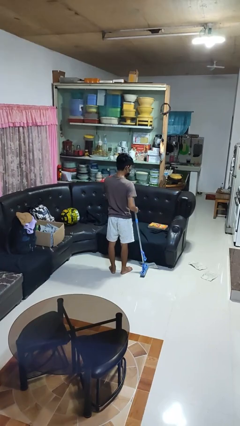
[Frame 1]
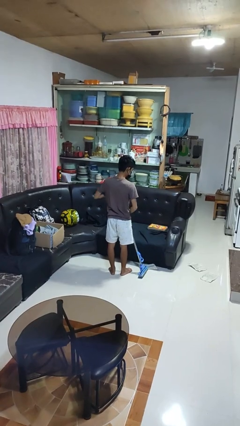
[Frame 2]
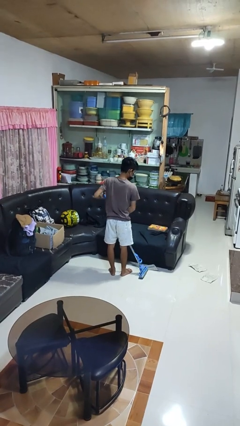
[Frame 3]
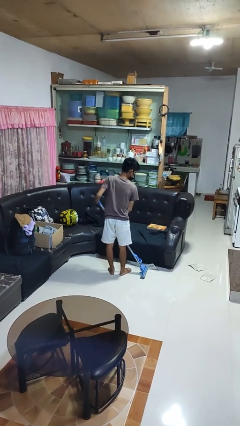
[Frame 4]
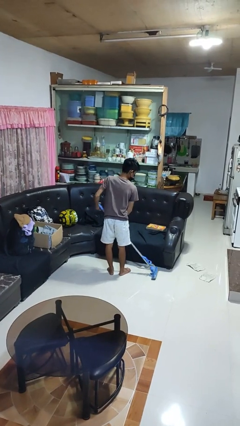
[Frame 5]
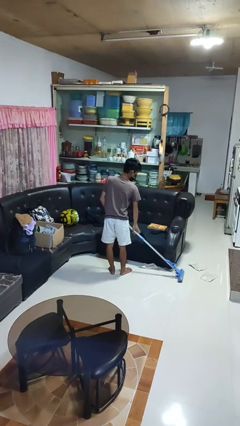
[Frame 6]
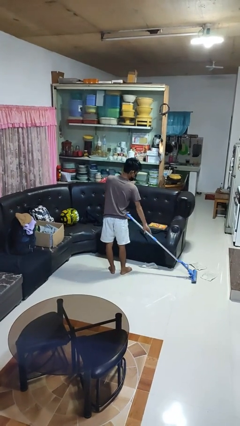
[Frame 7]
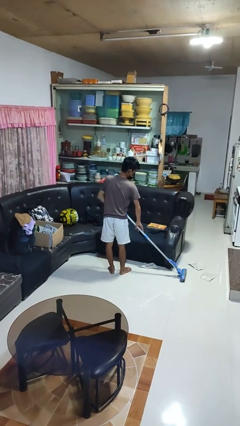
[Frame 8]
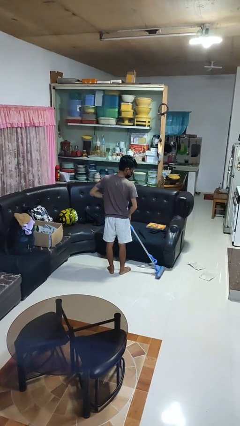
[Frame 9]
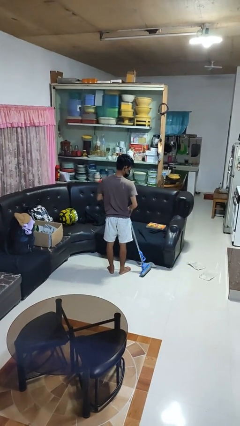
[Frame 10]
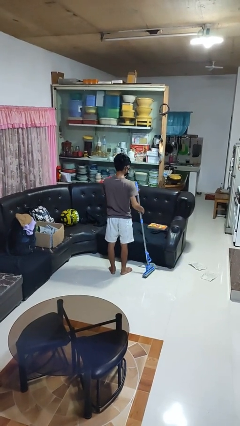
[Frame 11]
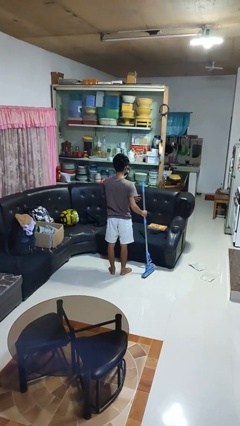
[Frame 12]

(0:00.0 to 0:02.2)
person mops

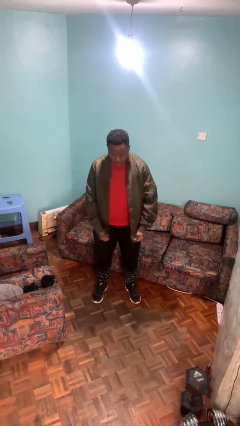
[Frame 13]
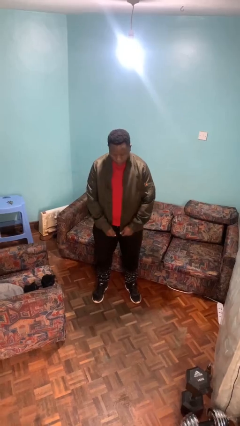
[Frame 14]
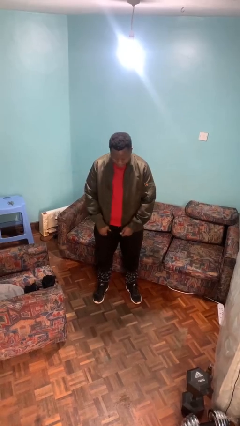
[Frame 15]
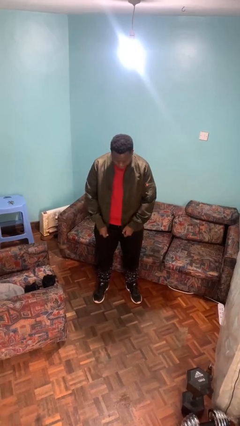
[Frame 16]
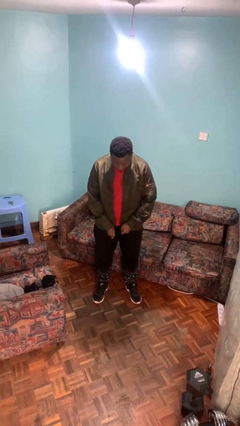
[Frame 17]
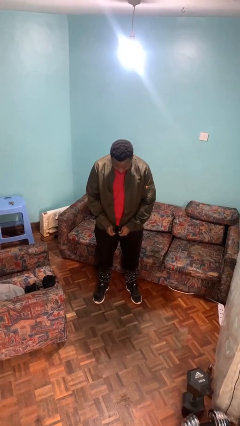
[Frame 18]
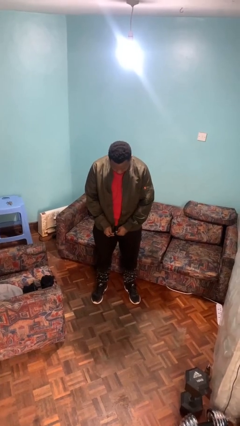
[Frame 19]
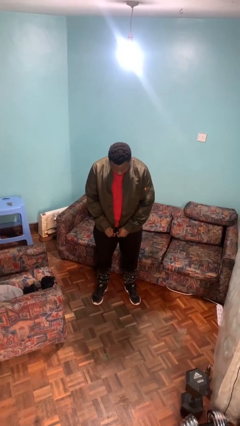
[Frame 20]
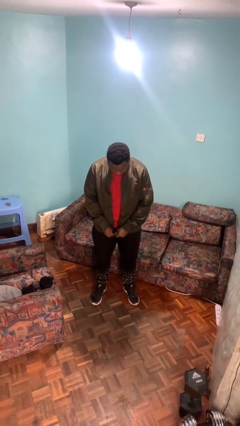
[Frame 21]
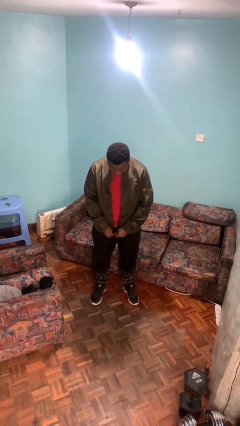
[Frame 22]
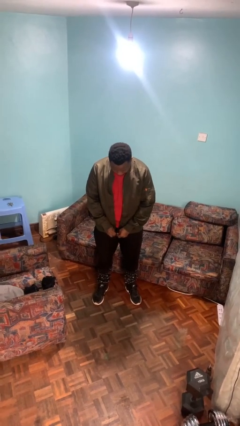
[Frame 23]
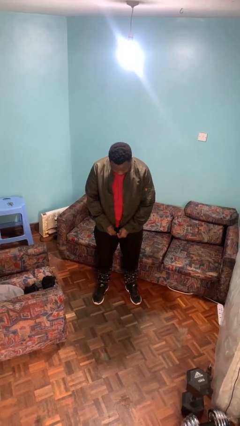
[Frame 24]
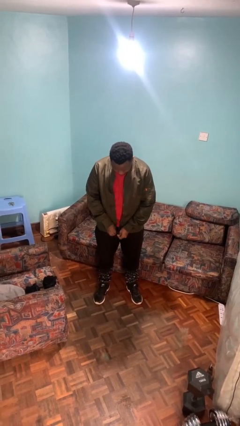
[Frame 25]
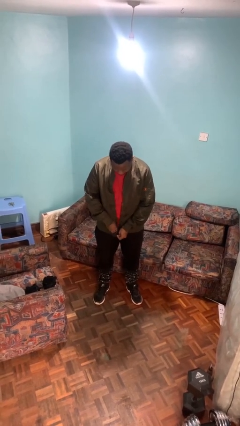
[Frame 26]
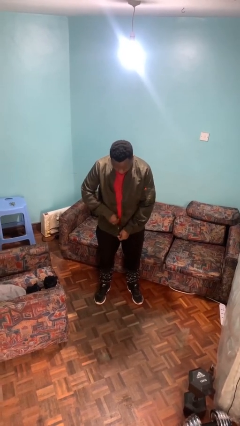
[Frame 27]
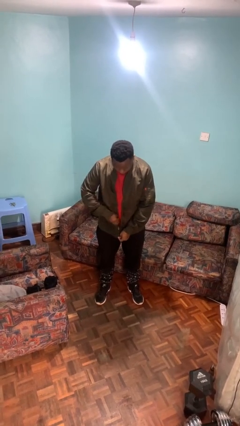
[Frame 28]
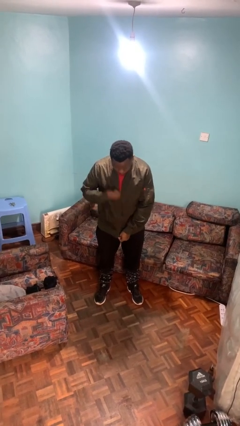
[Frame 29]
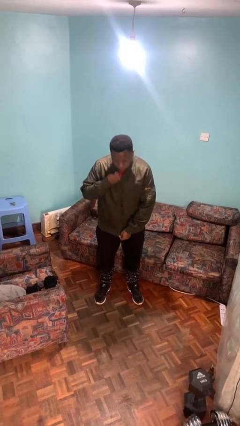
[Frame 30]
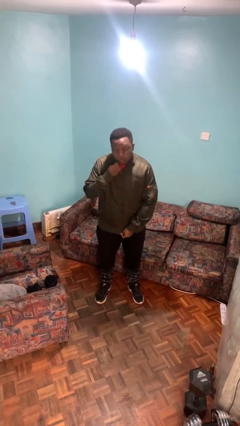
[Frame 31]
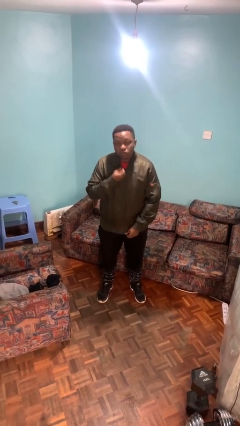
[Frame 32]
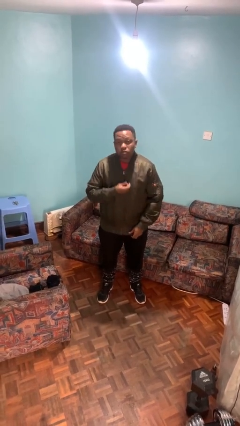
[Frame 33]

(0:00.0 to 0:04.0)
person zips up jacket

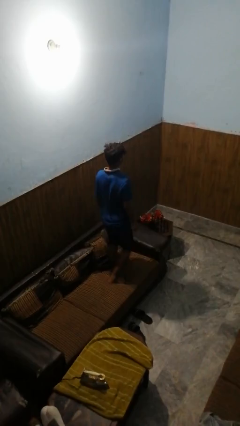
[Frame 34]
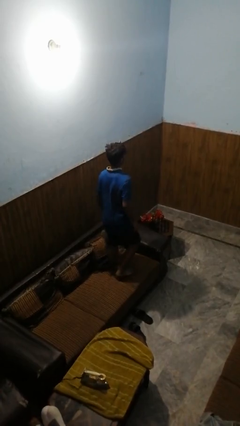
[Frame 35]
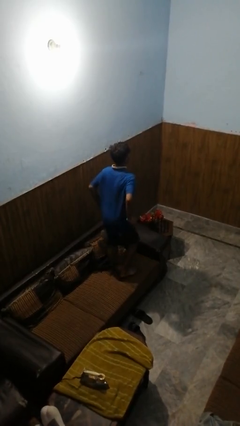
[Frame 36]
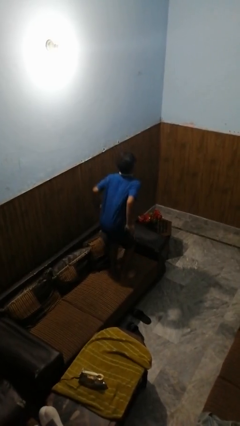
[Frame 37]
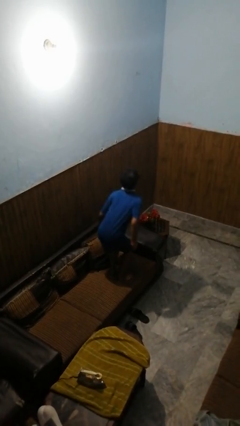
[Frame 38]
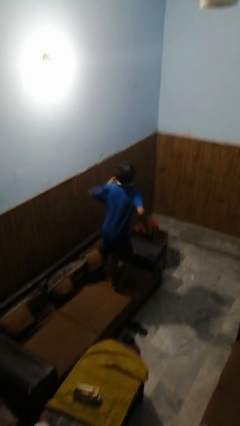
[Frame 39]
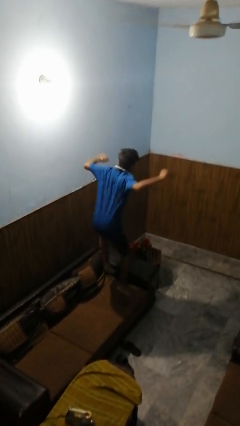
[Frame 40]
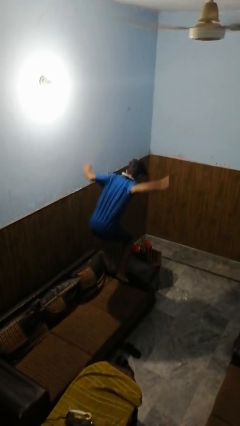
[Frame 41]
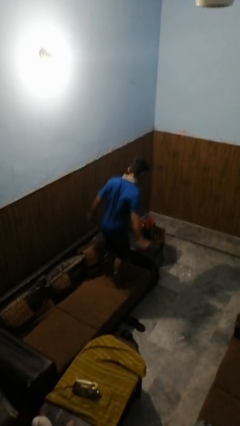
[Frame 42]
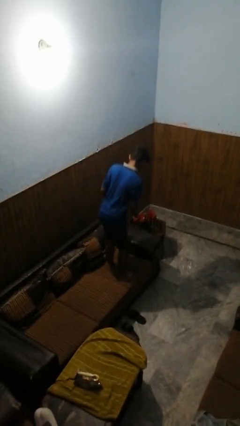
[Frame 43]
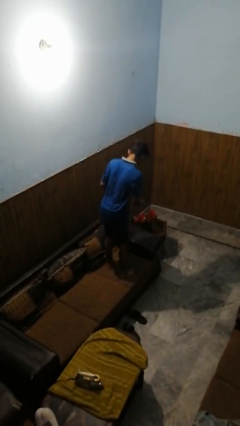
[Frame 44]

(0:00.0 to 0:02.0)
person jumps on couch

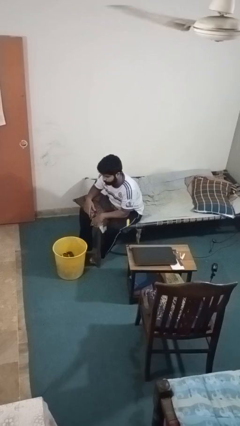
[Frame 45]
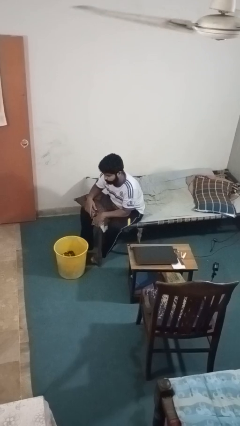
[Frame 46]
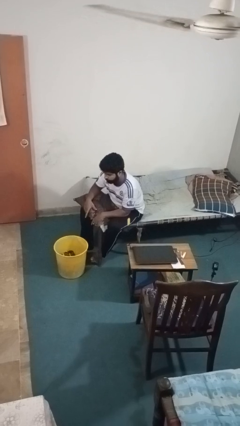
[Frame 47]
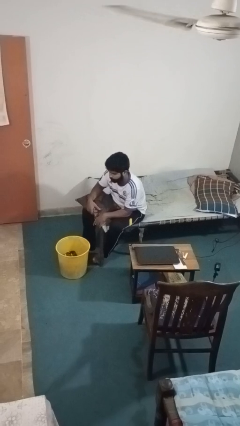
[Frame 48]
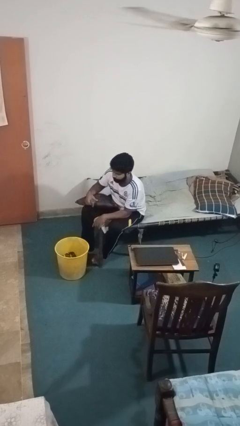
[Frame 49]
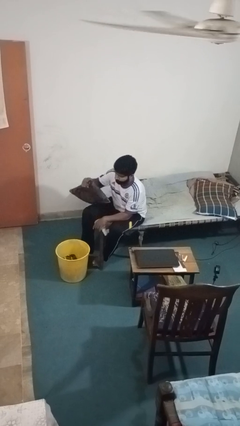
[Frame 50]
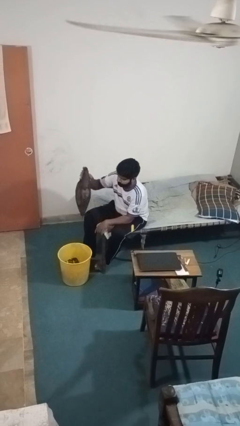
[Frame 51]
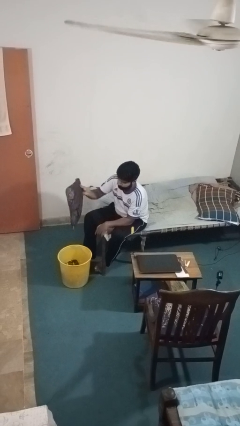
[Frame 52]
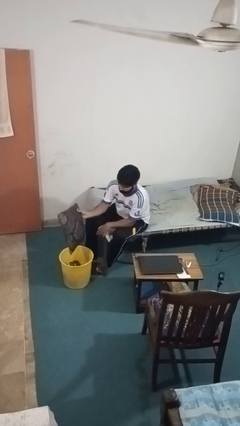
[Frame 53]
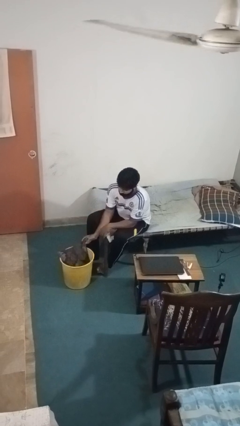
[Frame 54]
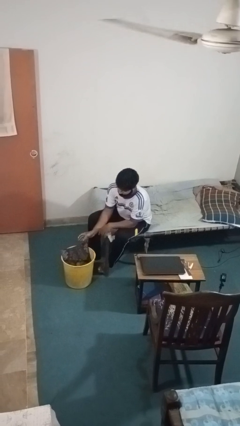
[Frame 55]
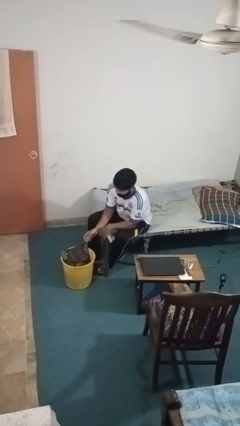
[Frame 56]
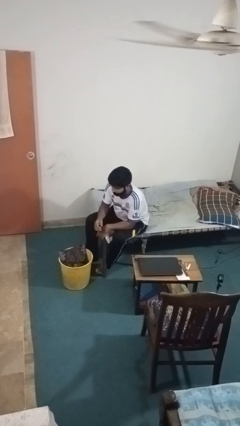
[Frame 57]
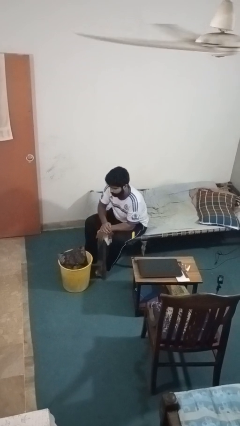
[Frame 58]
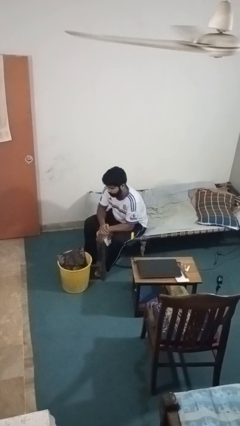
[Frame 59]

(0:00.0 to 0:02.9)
person puts object into basket

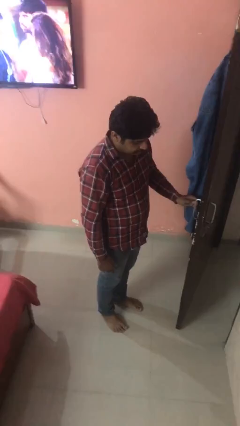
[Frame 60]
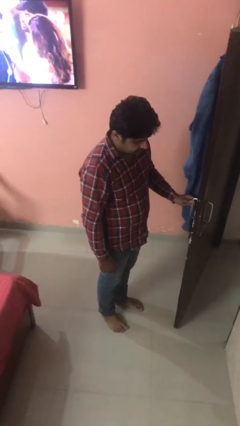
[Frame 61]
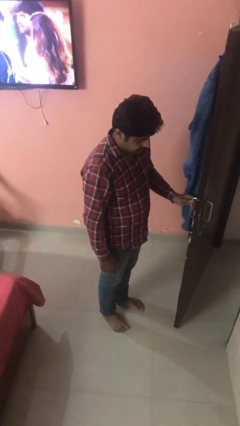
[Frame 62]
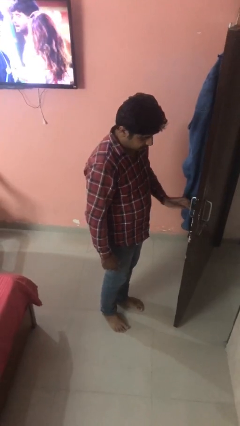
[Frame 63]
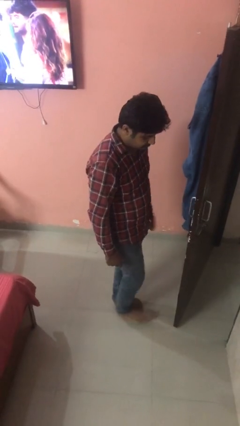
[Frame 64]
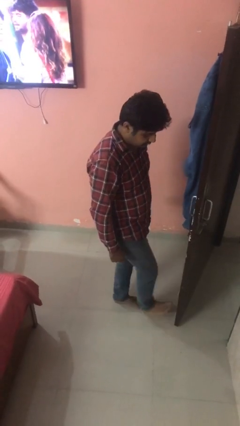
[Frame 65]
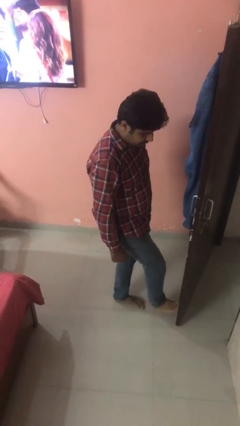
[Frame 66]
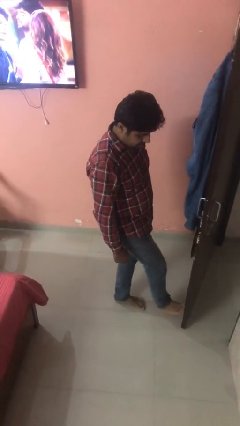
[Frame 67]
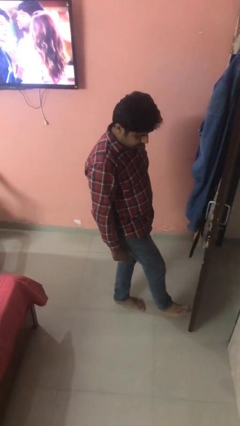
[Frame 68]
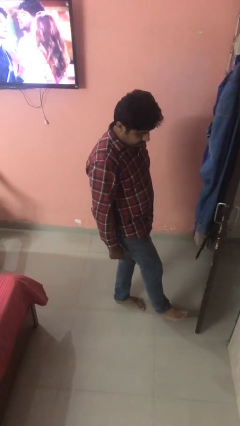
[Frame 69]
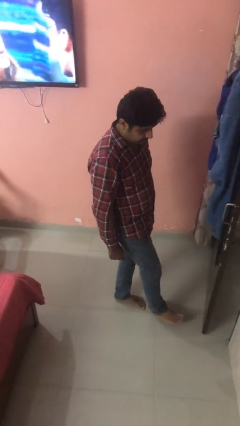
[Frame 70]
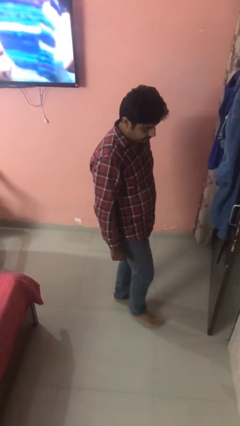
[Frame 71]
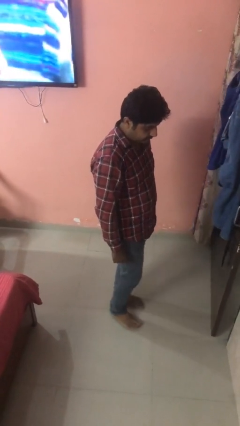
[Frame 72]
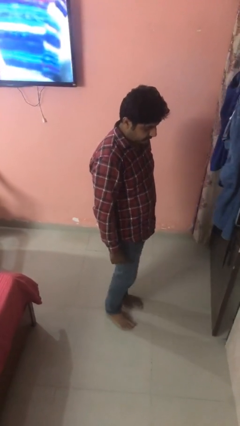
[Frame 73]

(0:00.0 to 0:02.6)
person closes door with foot

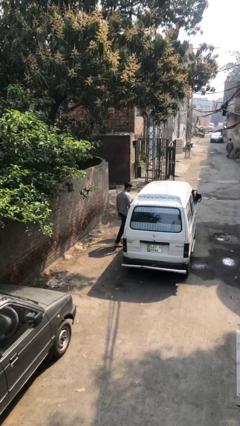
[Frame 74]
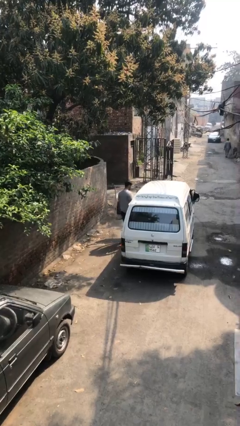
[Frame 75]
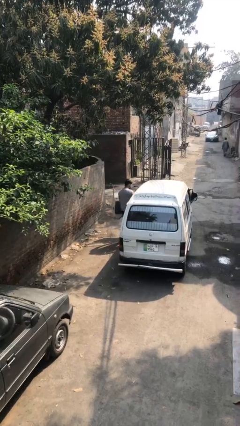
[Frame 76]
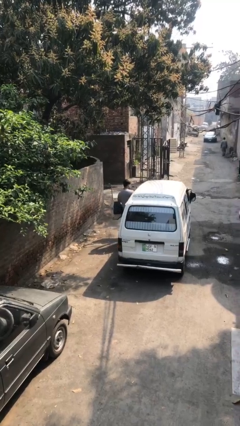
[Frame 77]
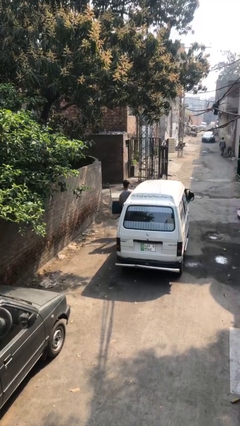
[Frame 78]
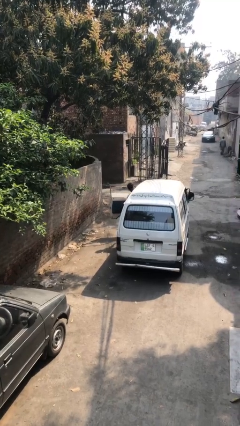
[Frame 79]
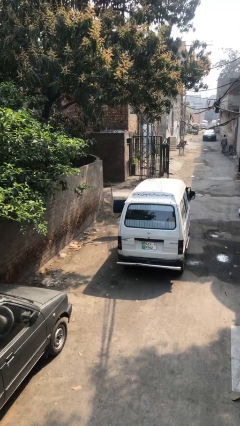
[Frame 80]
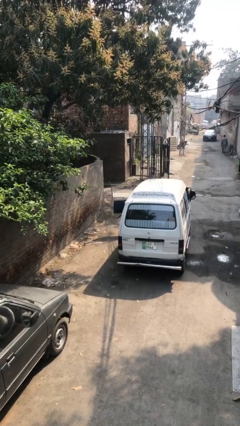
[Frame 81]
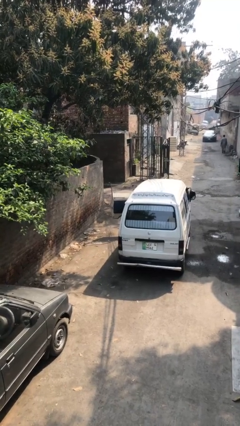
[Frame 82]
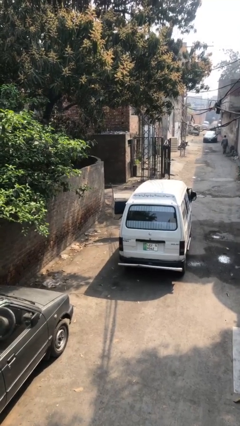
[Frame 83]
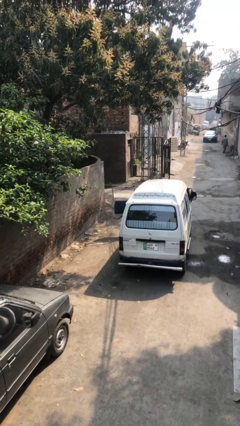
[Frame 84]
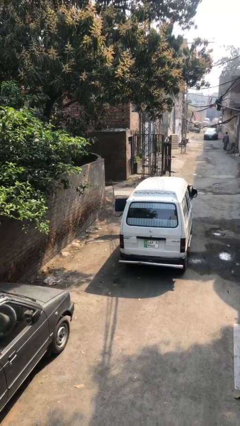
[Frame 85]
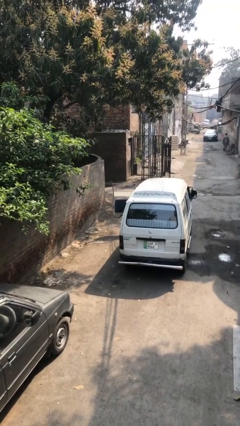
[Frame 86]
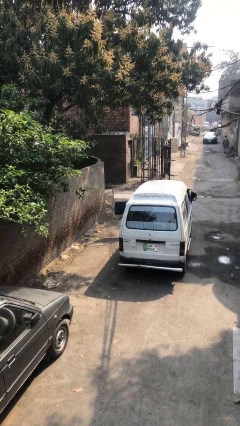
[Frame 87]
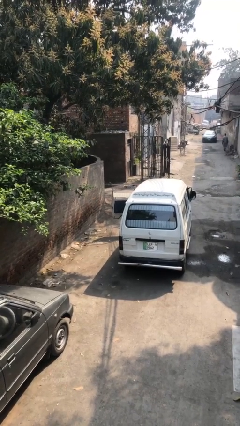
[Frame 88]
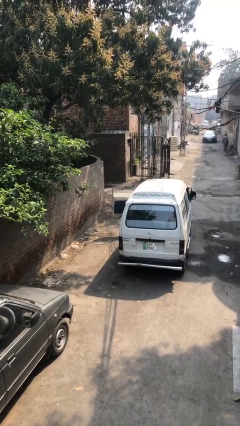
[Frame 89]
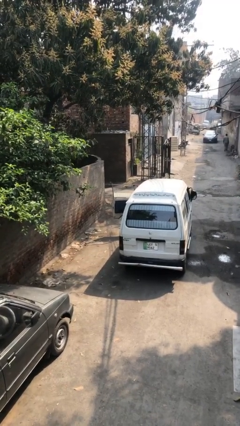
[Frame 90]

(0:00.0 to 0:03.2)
person enters car

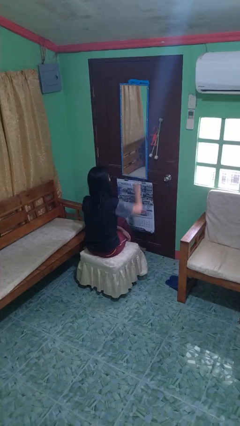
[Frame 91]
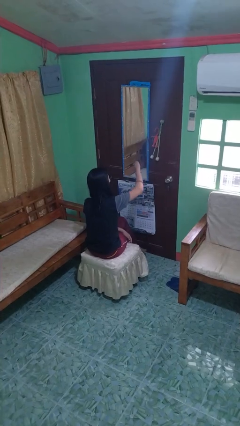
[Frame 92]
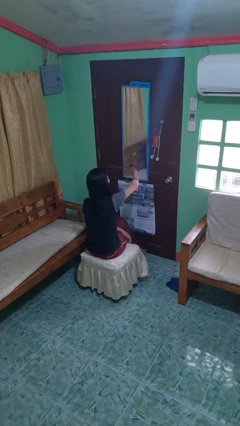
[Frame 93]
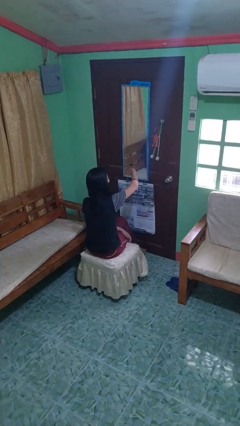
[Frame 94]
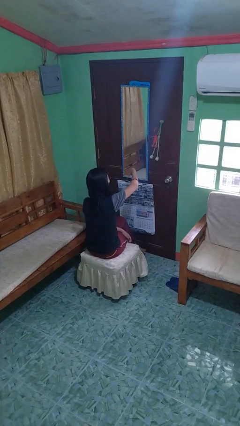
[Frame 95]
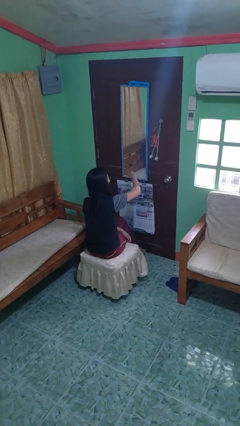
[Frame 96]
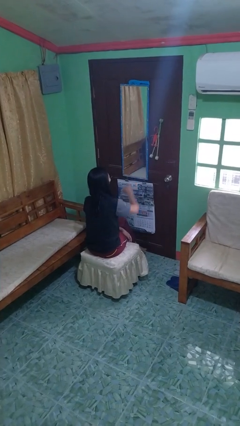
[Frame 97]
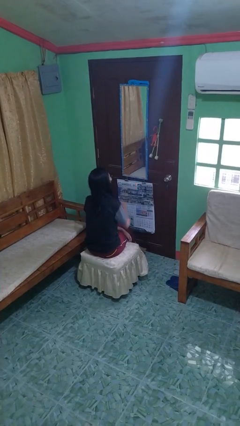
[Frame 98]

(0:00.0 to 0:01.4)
person gestures thumbs down
